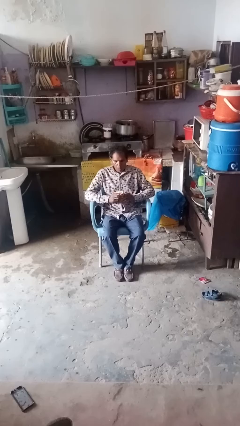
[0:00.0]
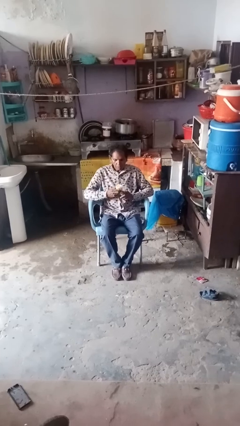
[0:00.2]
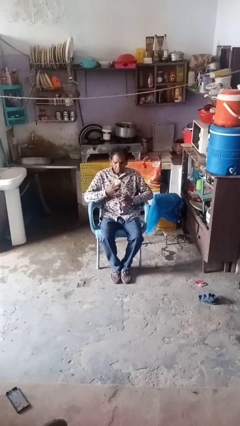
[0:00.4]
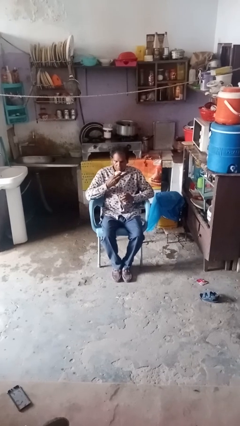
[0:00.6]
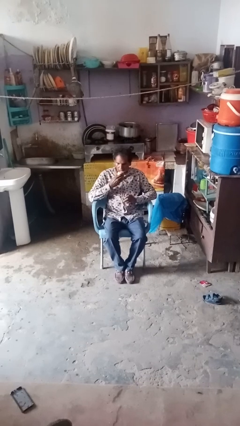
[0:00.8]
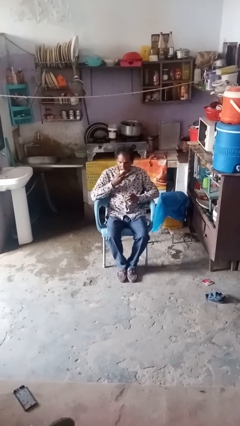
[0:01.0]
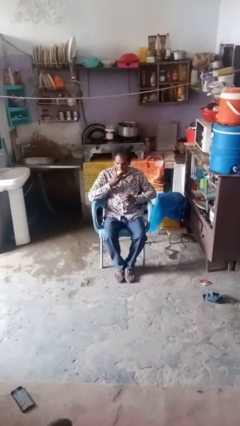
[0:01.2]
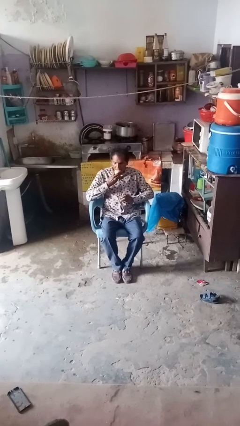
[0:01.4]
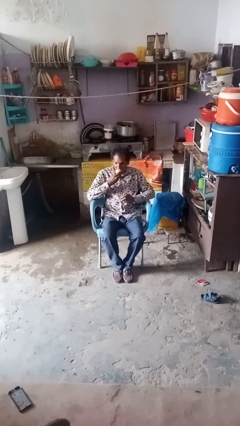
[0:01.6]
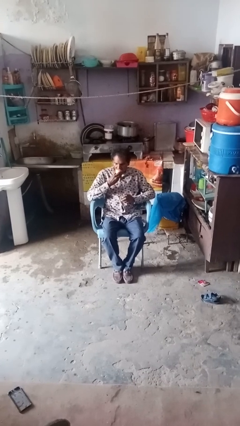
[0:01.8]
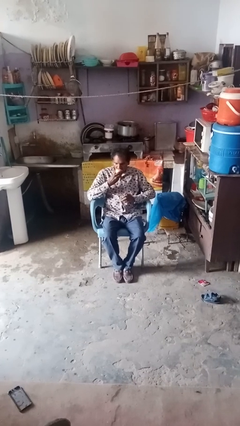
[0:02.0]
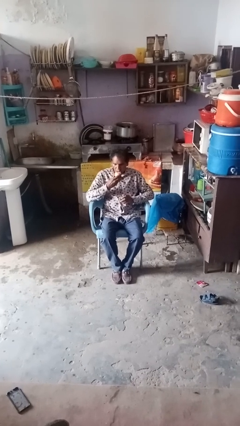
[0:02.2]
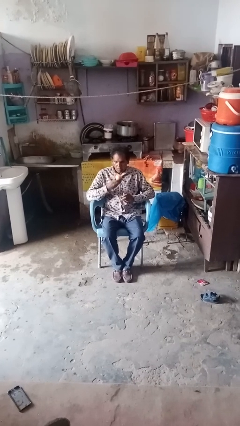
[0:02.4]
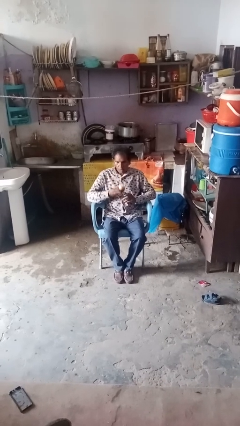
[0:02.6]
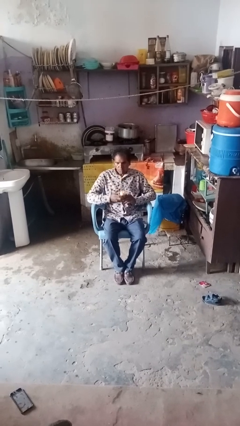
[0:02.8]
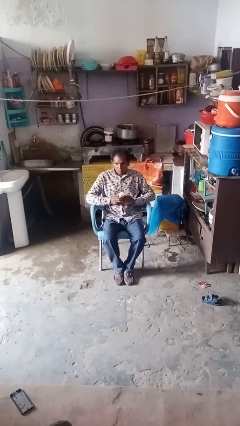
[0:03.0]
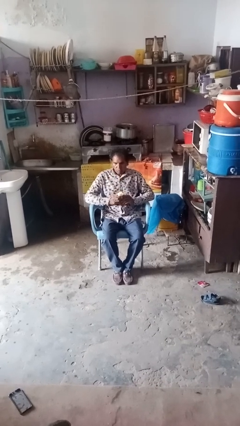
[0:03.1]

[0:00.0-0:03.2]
person eats apple

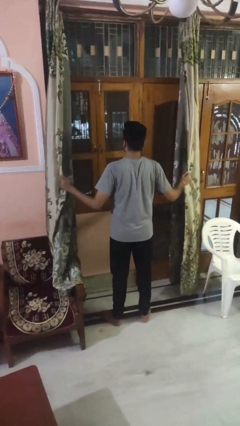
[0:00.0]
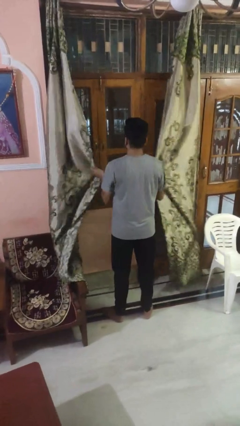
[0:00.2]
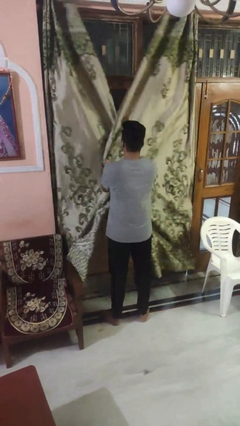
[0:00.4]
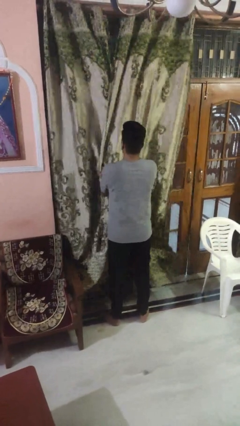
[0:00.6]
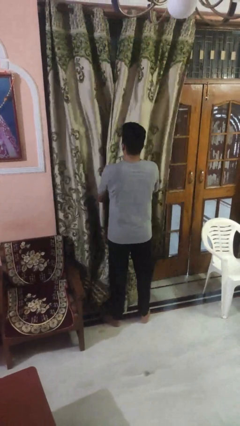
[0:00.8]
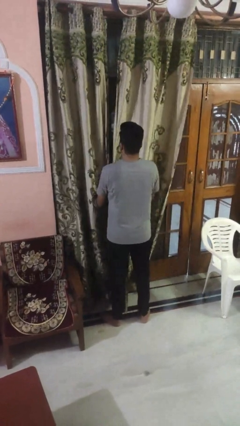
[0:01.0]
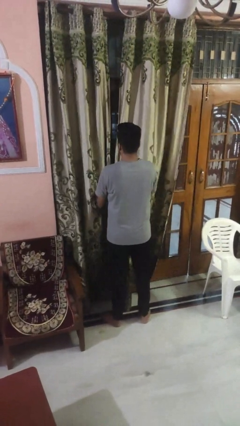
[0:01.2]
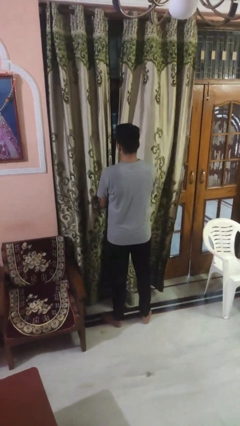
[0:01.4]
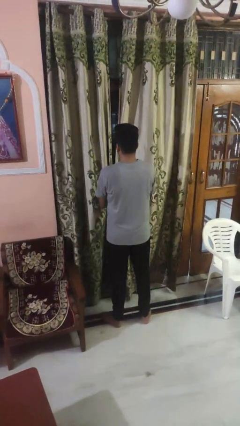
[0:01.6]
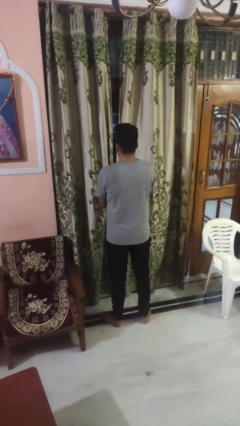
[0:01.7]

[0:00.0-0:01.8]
person closes curtains

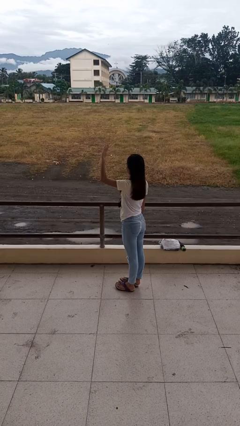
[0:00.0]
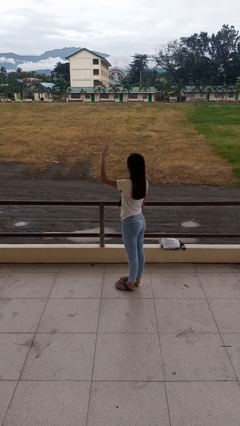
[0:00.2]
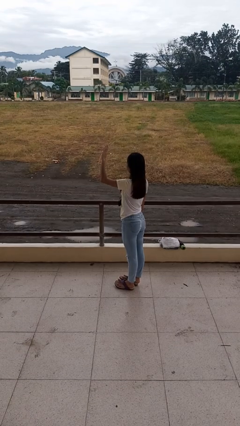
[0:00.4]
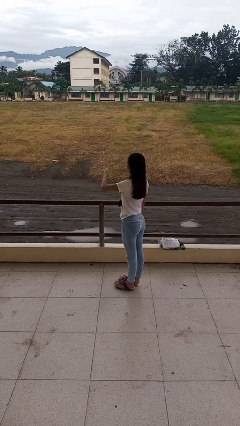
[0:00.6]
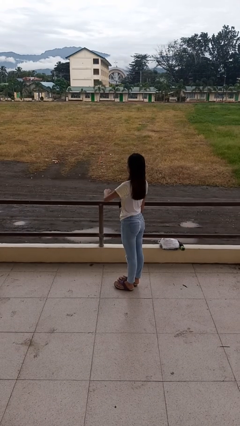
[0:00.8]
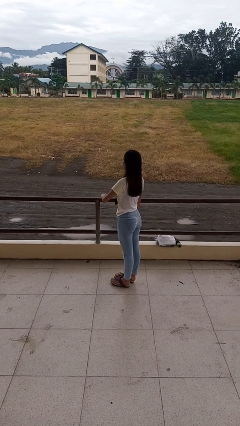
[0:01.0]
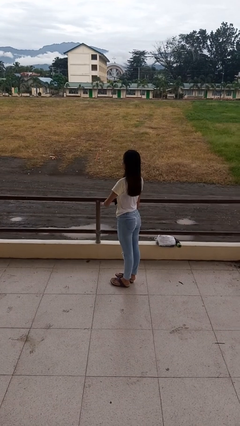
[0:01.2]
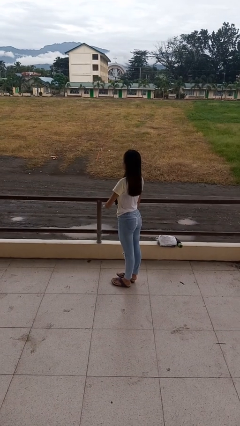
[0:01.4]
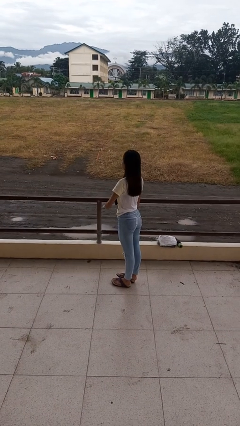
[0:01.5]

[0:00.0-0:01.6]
person gestures swipe down

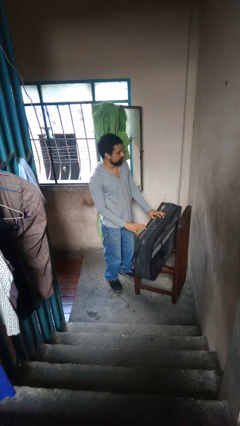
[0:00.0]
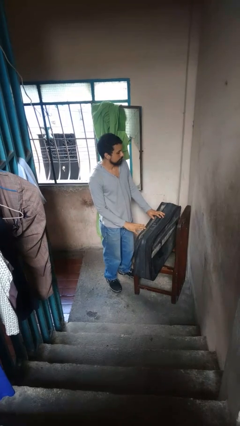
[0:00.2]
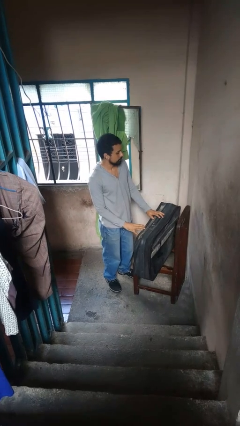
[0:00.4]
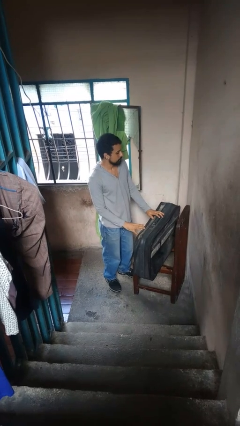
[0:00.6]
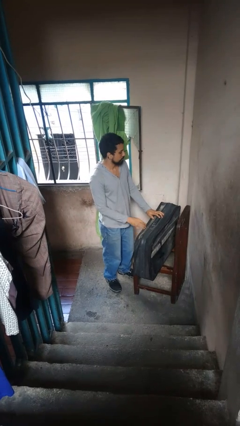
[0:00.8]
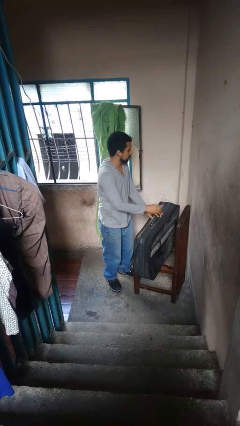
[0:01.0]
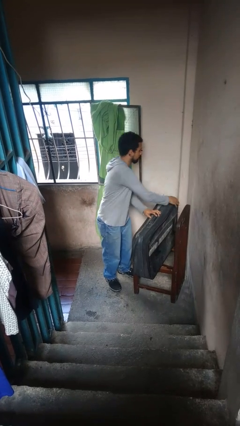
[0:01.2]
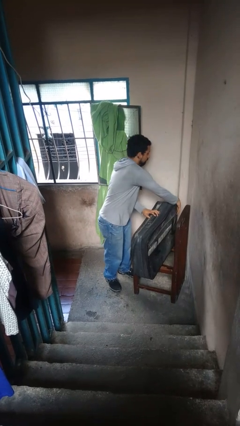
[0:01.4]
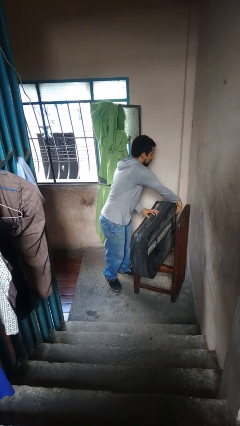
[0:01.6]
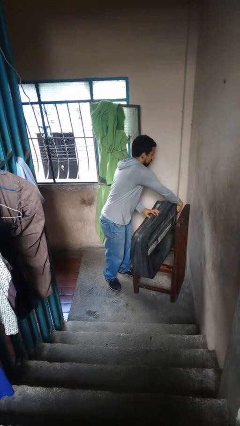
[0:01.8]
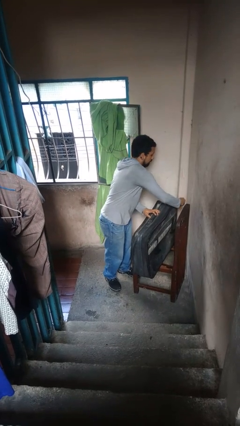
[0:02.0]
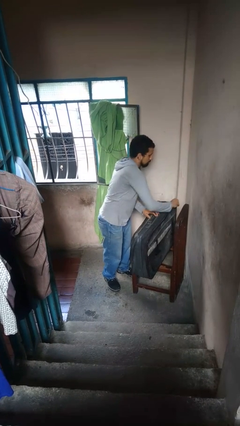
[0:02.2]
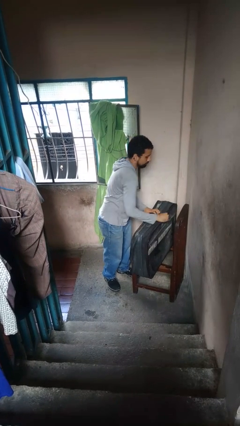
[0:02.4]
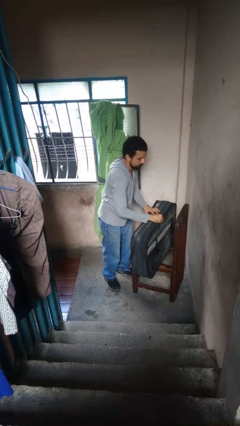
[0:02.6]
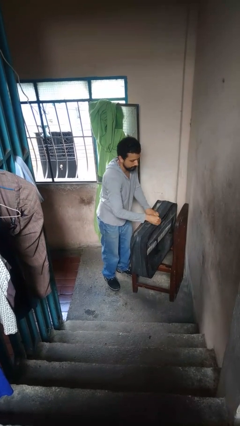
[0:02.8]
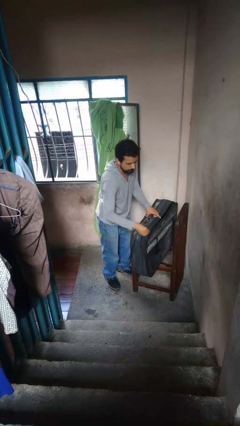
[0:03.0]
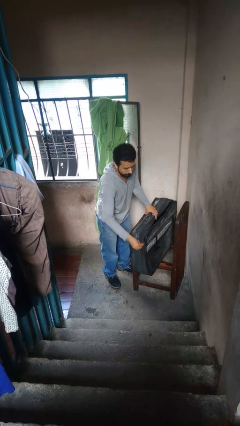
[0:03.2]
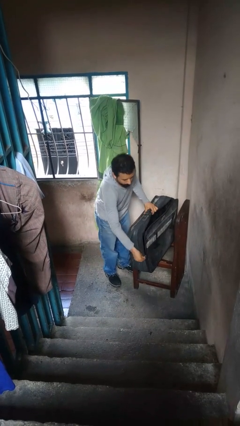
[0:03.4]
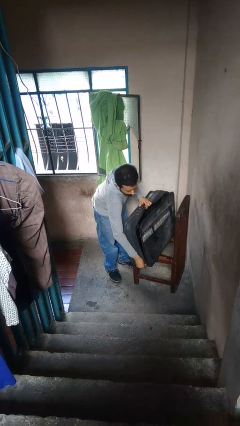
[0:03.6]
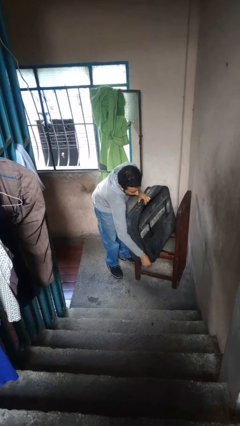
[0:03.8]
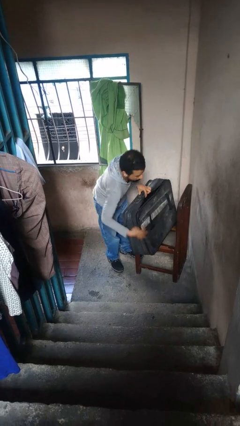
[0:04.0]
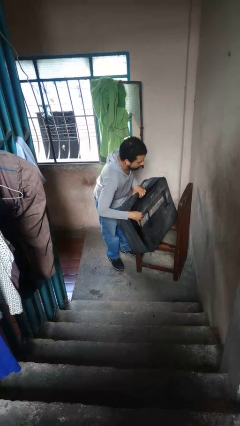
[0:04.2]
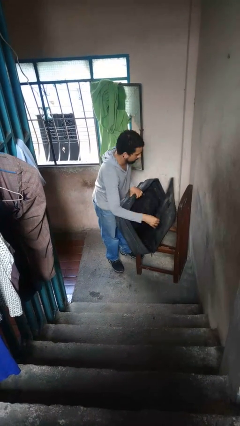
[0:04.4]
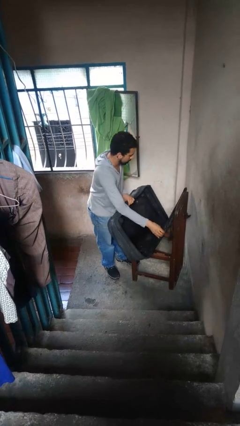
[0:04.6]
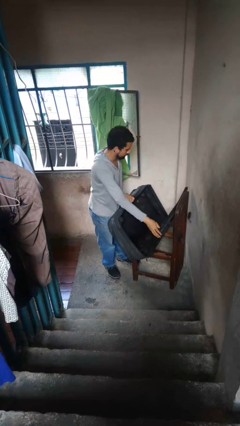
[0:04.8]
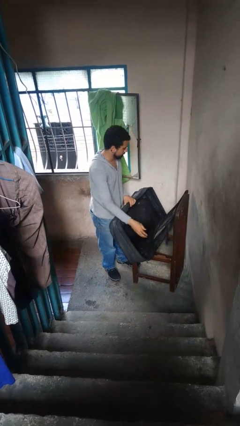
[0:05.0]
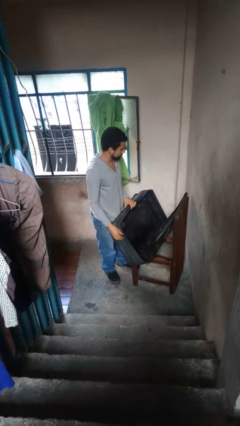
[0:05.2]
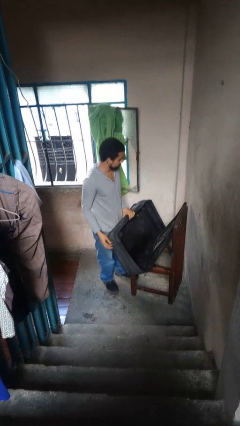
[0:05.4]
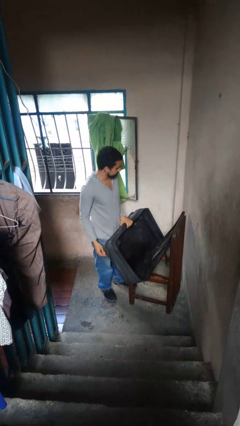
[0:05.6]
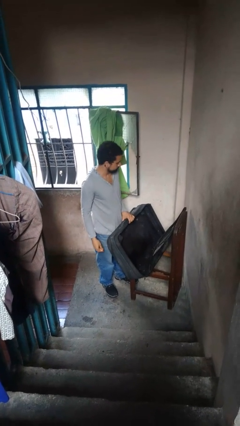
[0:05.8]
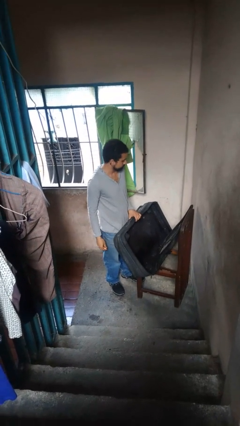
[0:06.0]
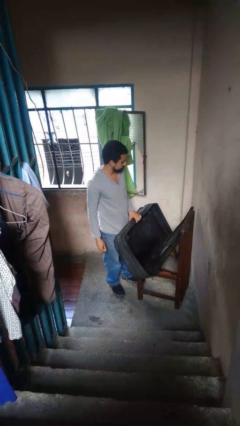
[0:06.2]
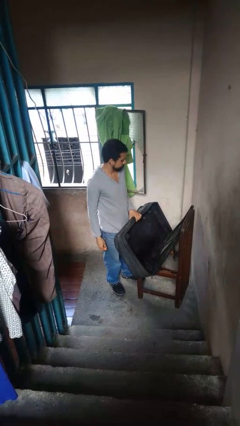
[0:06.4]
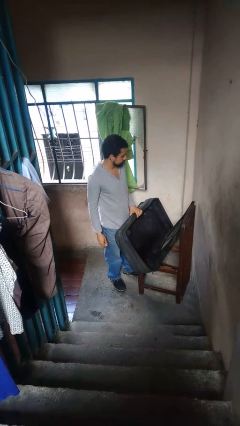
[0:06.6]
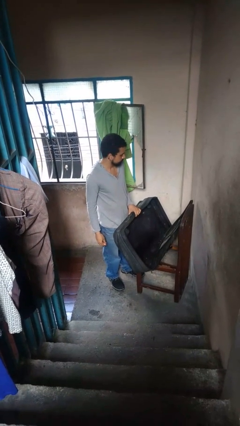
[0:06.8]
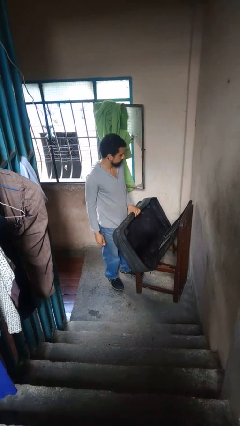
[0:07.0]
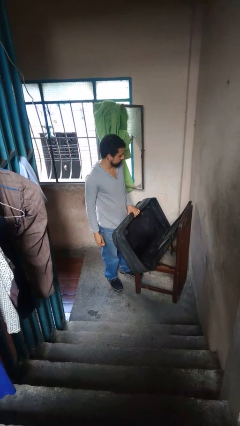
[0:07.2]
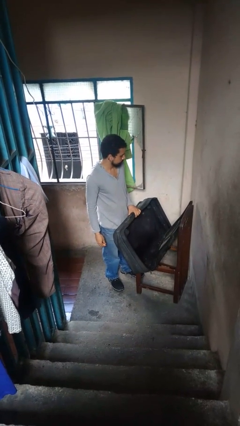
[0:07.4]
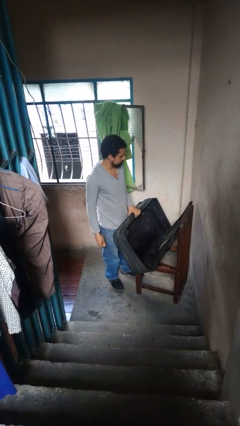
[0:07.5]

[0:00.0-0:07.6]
person opens suitcase

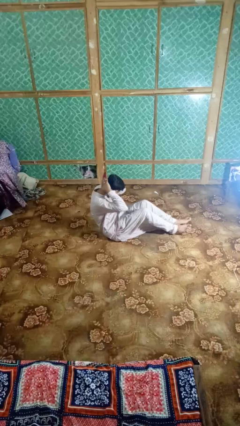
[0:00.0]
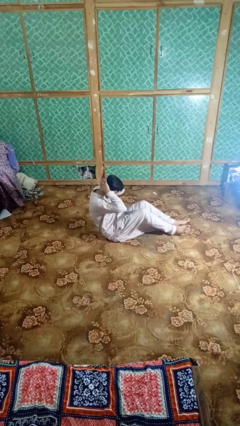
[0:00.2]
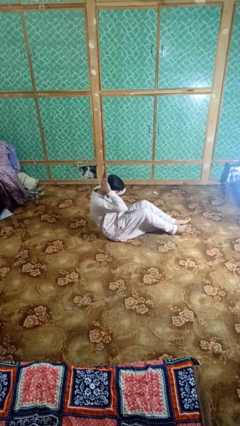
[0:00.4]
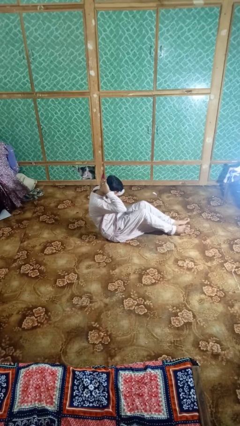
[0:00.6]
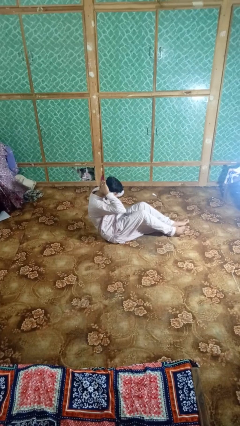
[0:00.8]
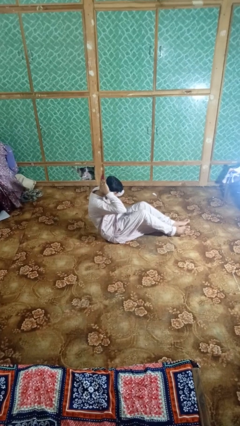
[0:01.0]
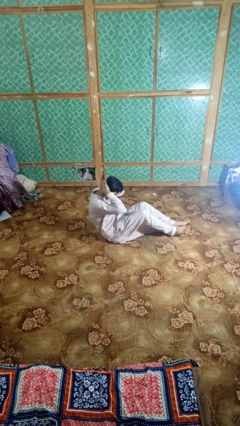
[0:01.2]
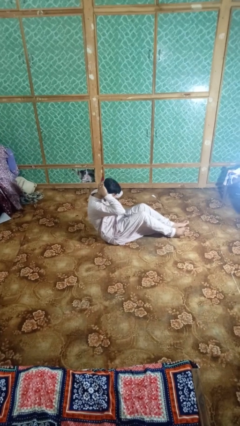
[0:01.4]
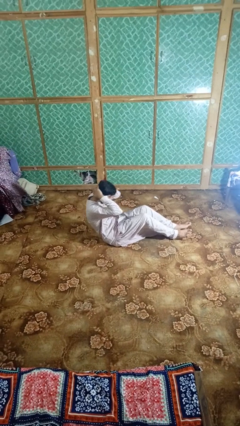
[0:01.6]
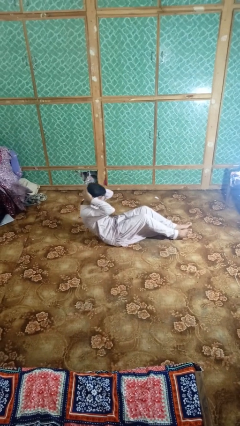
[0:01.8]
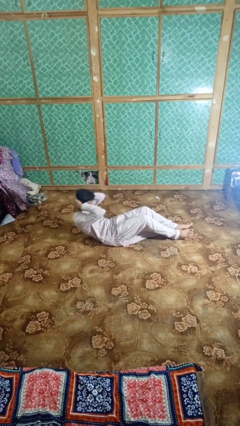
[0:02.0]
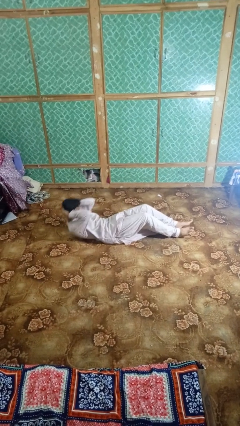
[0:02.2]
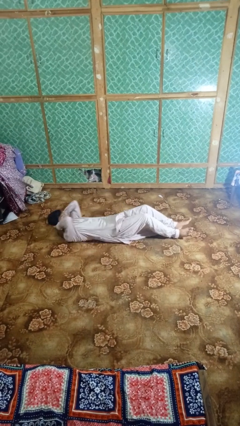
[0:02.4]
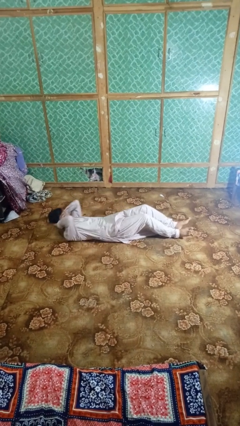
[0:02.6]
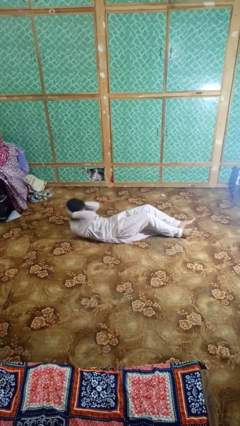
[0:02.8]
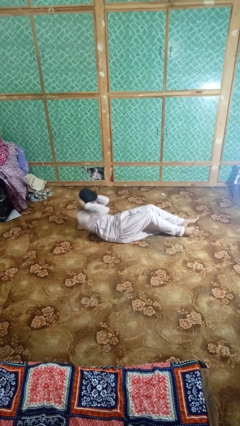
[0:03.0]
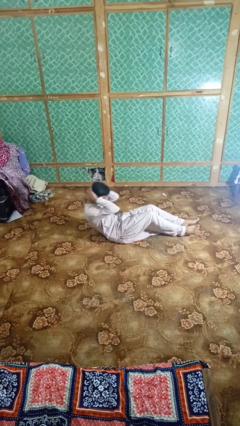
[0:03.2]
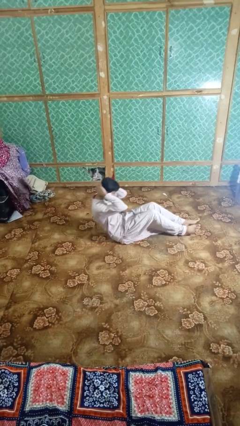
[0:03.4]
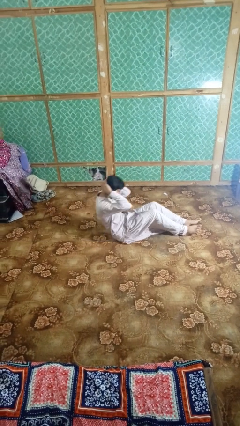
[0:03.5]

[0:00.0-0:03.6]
person exercises with situp
